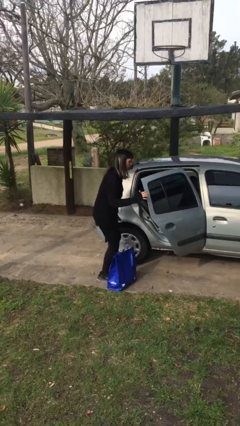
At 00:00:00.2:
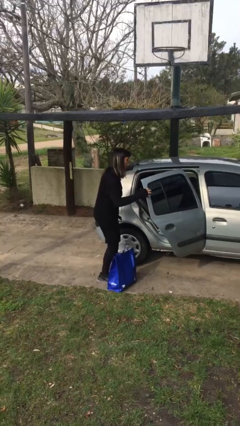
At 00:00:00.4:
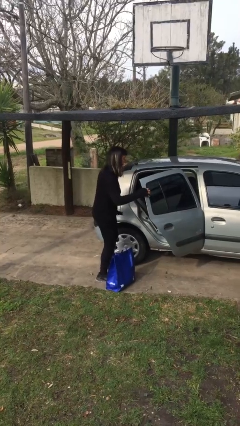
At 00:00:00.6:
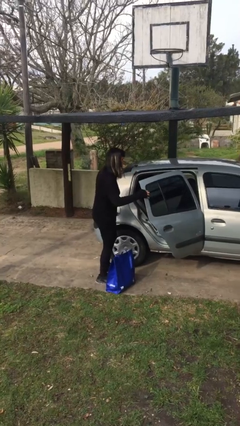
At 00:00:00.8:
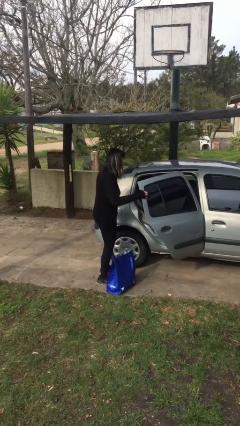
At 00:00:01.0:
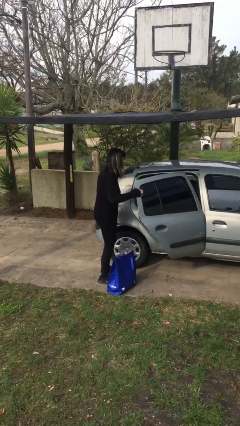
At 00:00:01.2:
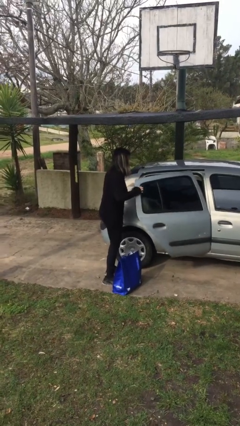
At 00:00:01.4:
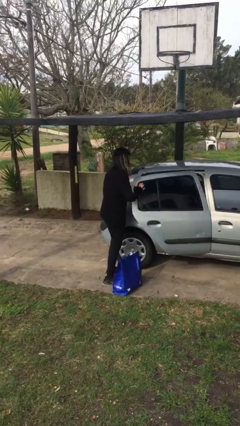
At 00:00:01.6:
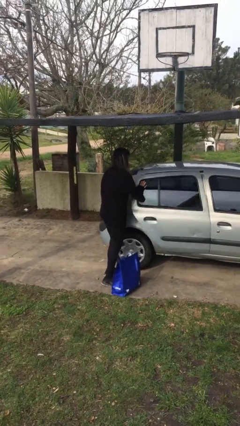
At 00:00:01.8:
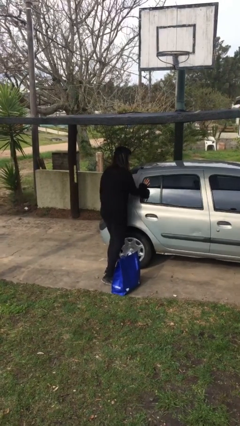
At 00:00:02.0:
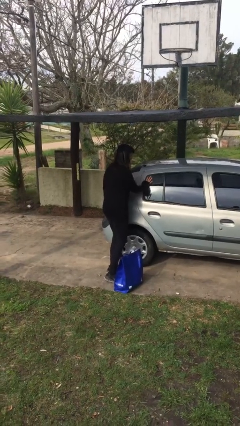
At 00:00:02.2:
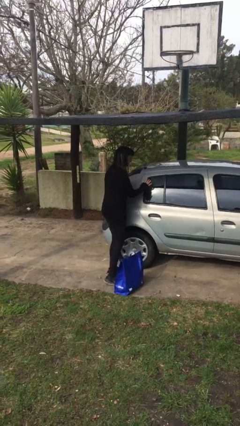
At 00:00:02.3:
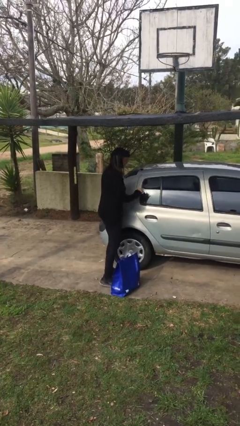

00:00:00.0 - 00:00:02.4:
person closes car door

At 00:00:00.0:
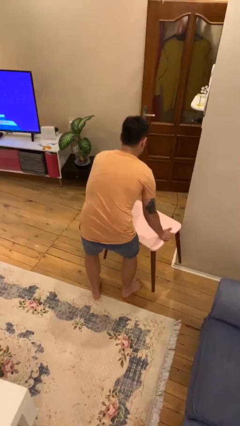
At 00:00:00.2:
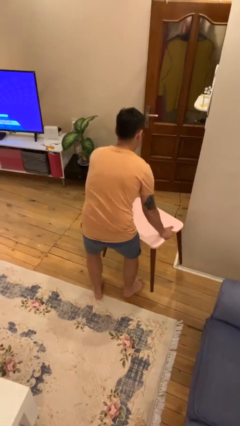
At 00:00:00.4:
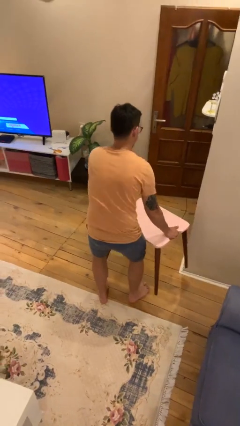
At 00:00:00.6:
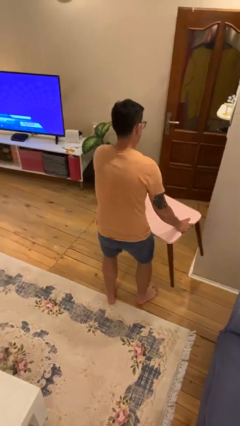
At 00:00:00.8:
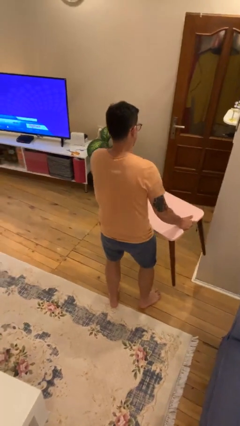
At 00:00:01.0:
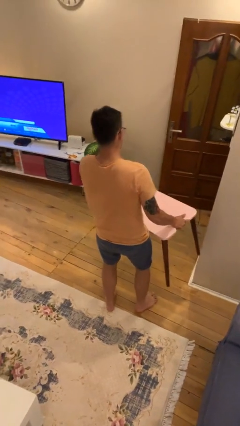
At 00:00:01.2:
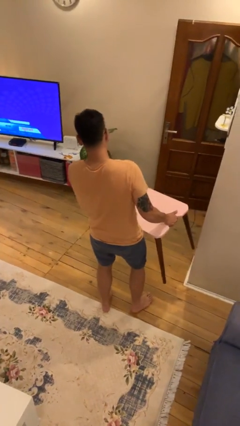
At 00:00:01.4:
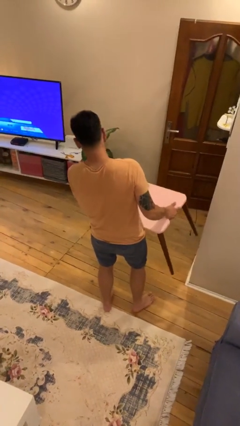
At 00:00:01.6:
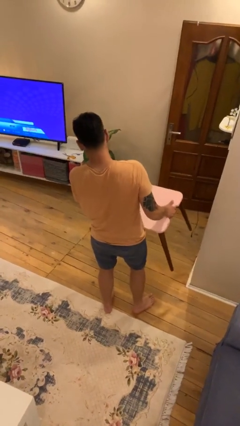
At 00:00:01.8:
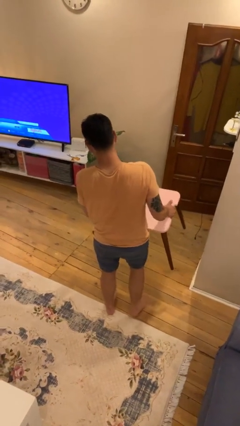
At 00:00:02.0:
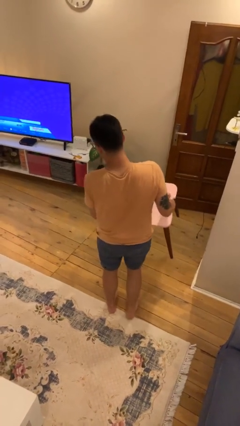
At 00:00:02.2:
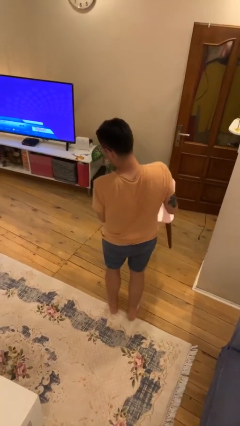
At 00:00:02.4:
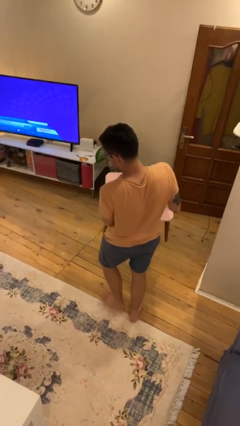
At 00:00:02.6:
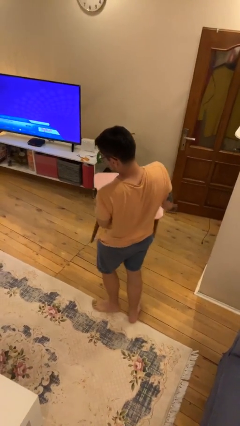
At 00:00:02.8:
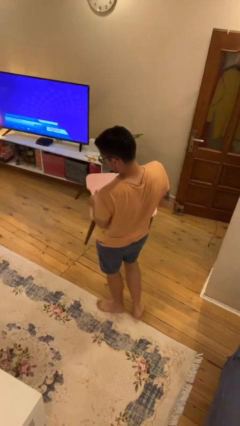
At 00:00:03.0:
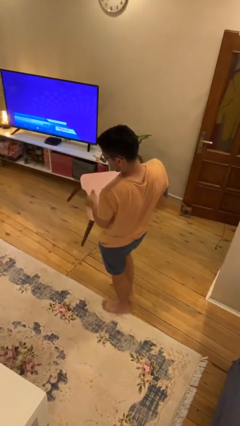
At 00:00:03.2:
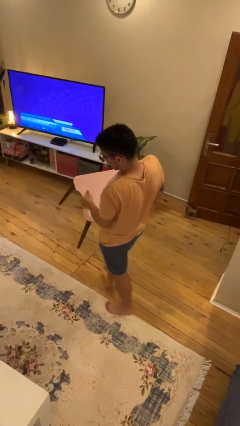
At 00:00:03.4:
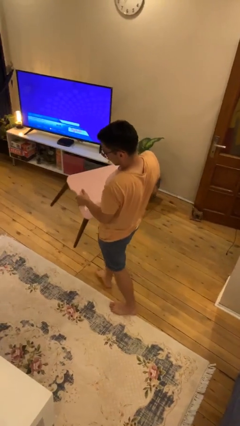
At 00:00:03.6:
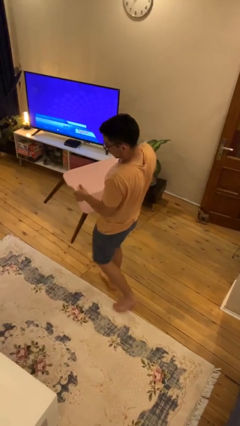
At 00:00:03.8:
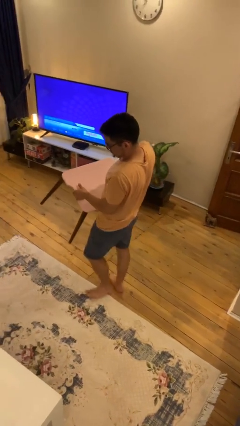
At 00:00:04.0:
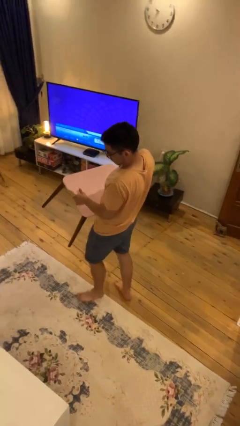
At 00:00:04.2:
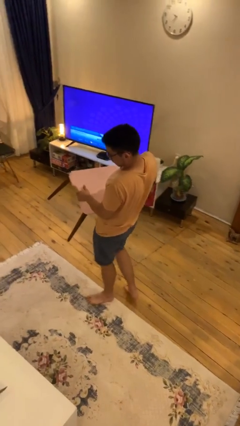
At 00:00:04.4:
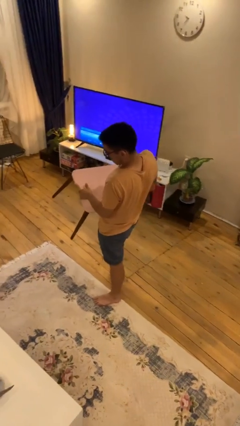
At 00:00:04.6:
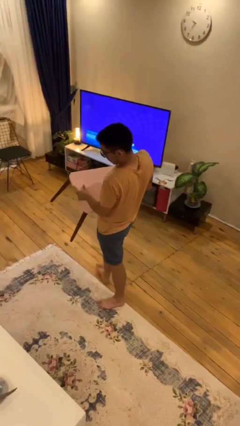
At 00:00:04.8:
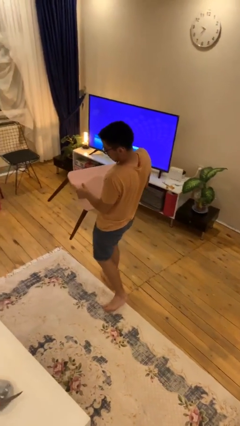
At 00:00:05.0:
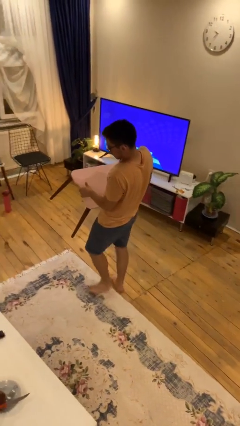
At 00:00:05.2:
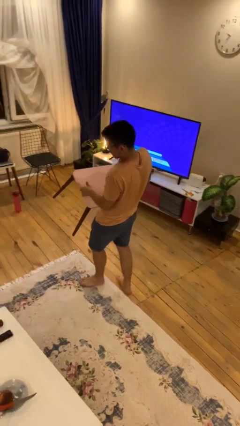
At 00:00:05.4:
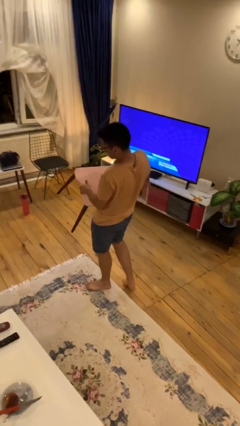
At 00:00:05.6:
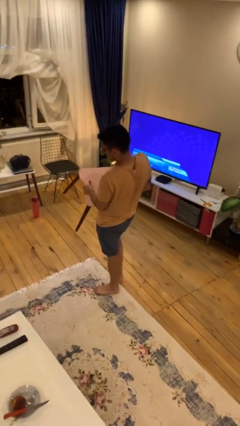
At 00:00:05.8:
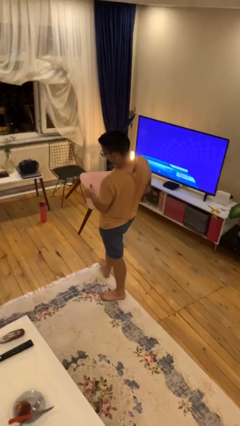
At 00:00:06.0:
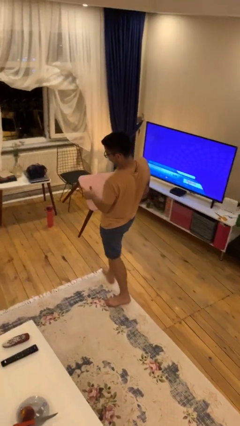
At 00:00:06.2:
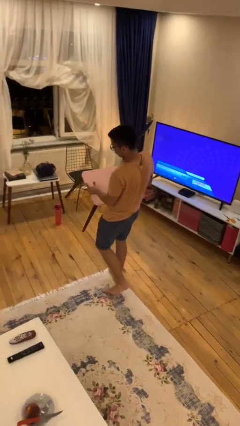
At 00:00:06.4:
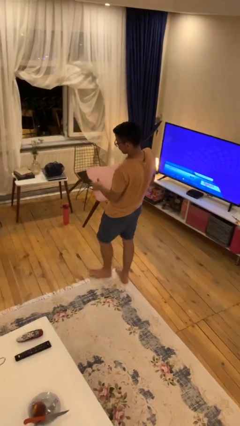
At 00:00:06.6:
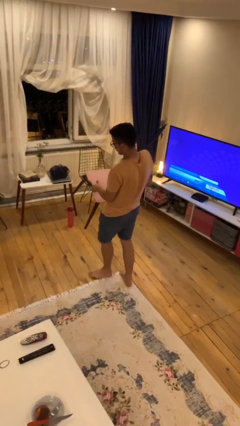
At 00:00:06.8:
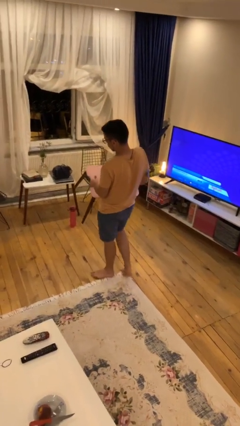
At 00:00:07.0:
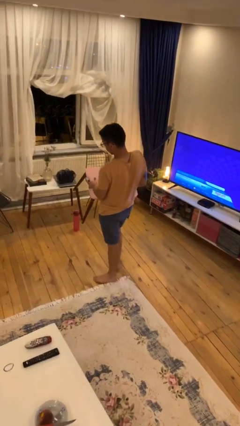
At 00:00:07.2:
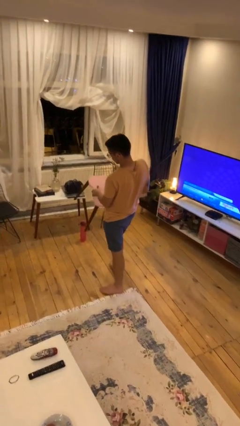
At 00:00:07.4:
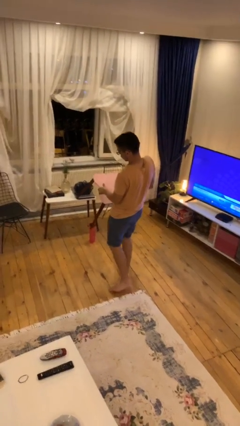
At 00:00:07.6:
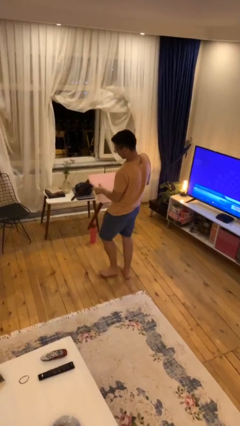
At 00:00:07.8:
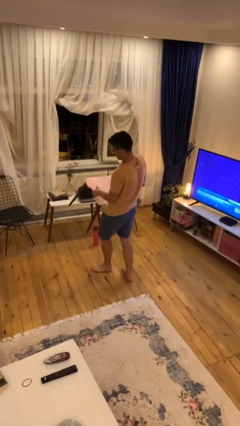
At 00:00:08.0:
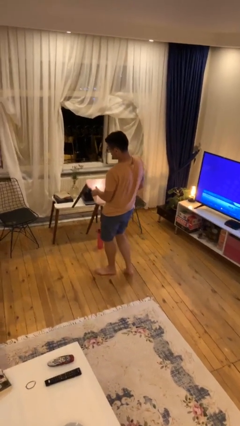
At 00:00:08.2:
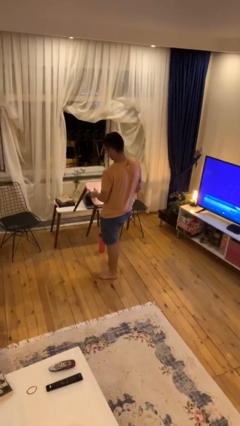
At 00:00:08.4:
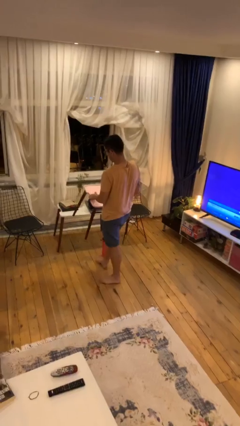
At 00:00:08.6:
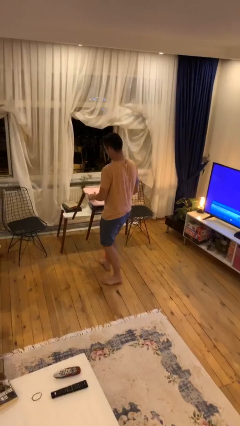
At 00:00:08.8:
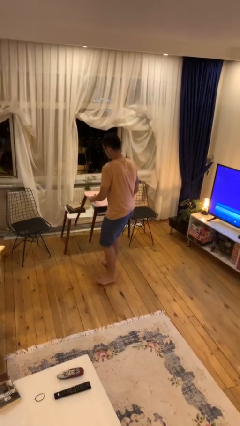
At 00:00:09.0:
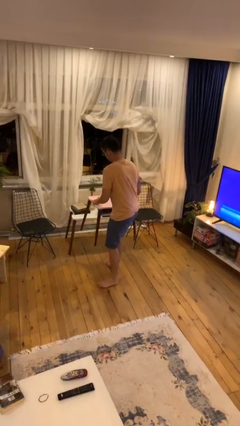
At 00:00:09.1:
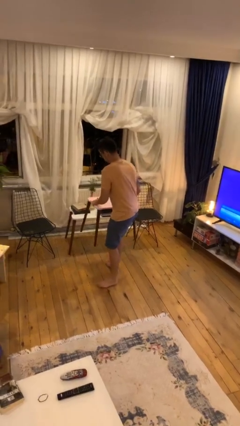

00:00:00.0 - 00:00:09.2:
person carries heavy object

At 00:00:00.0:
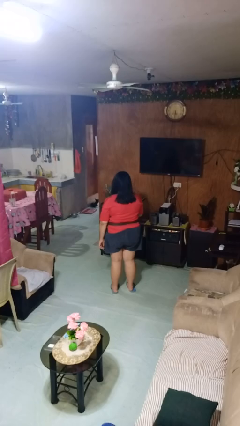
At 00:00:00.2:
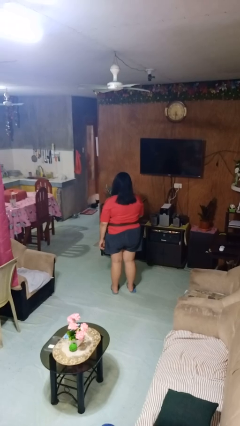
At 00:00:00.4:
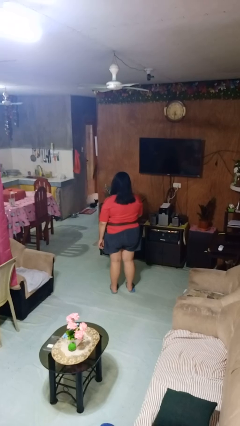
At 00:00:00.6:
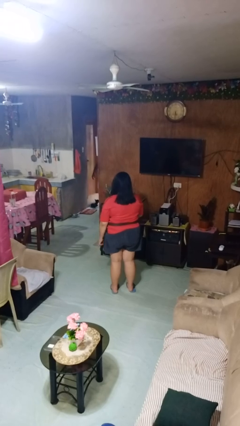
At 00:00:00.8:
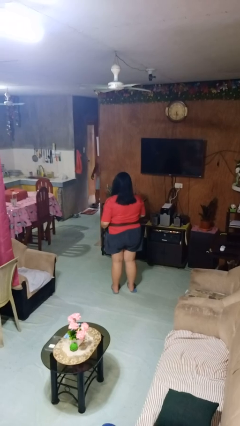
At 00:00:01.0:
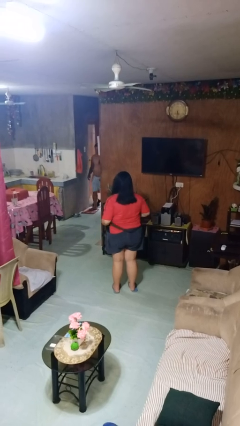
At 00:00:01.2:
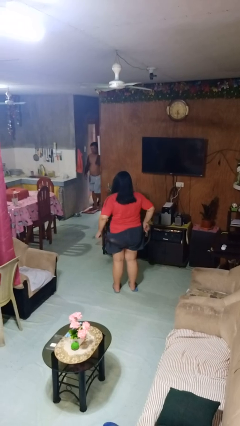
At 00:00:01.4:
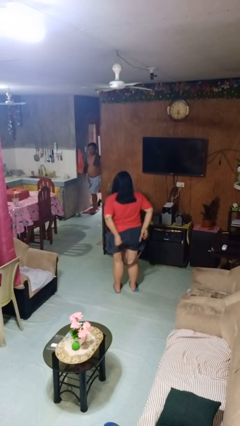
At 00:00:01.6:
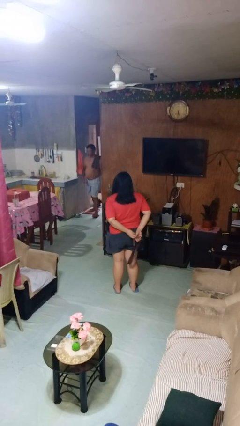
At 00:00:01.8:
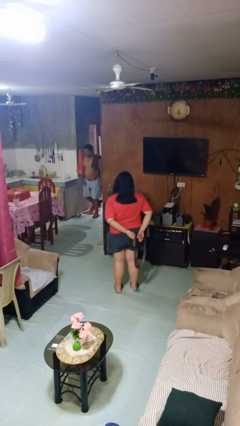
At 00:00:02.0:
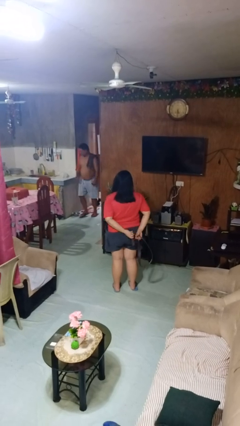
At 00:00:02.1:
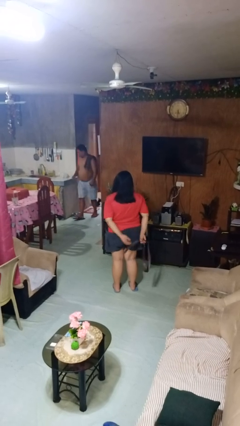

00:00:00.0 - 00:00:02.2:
person takes off belt

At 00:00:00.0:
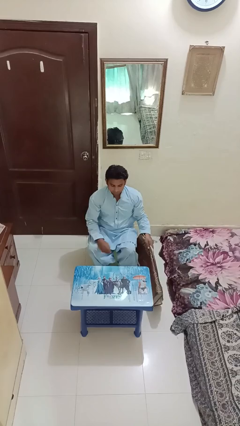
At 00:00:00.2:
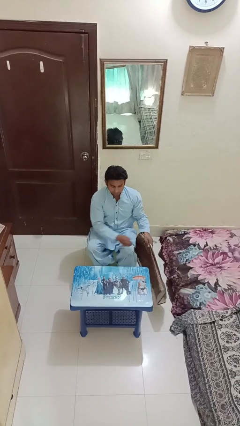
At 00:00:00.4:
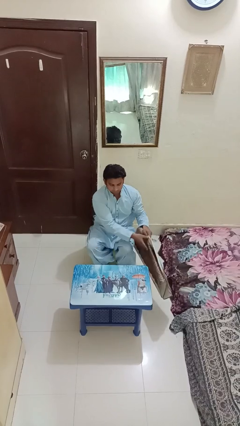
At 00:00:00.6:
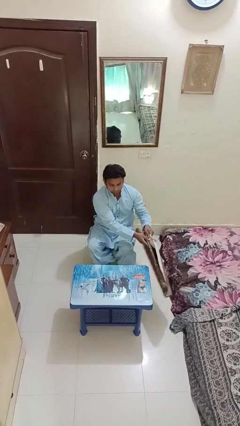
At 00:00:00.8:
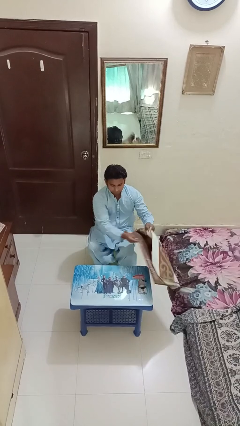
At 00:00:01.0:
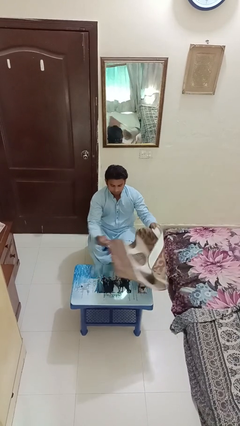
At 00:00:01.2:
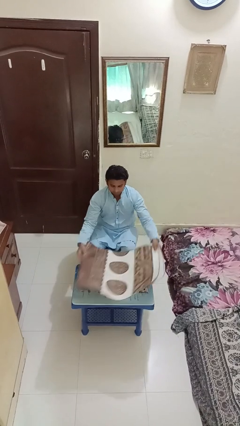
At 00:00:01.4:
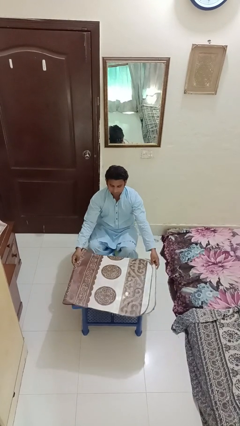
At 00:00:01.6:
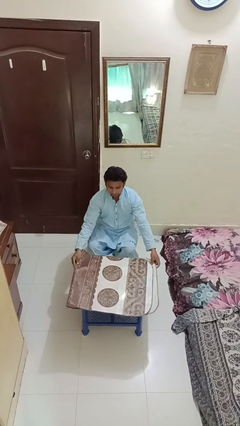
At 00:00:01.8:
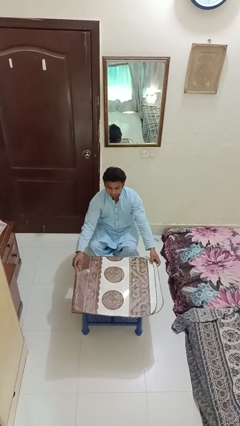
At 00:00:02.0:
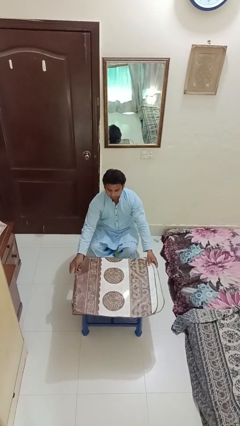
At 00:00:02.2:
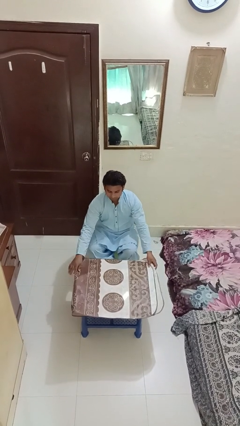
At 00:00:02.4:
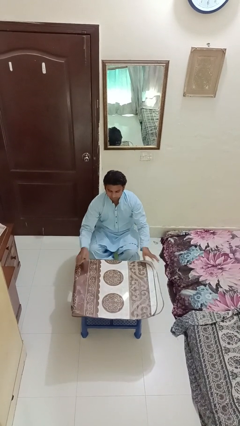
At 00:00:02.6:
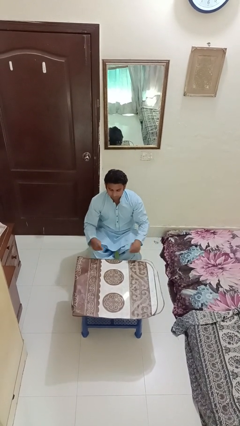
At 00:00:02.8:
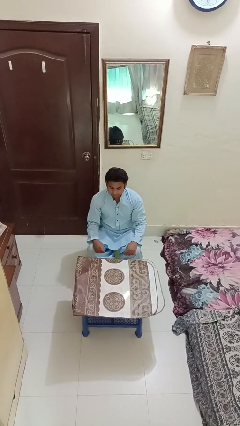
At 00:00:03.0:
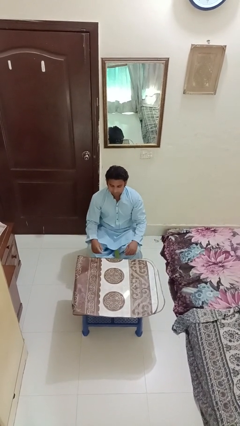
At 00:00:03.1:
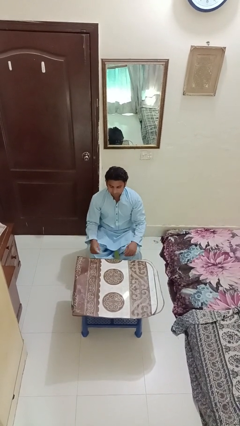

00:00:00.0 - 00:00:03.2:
person spreads tablecloth

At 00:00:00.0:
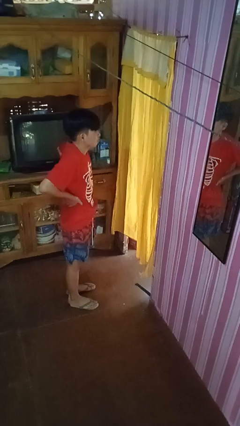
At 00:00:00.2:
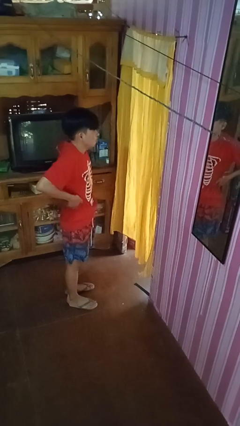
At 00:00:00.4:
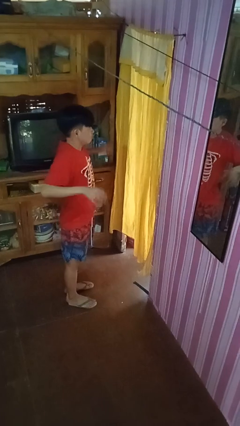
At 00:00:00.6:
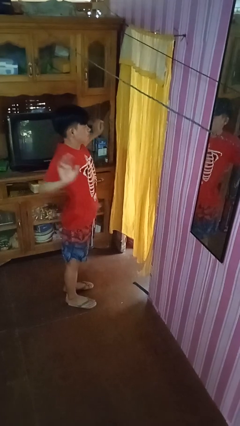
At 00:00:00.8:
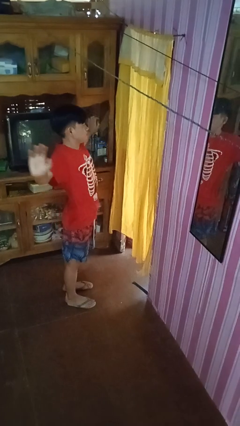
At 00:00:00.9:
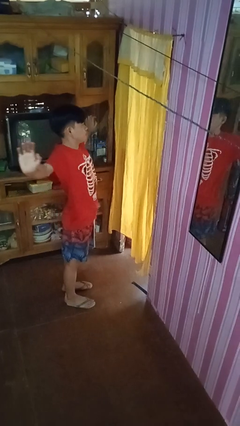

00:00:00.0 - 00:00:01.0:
person stretches arms to side
